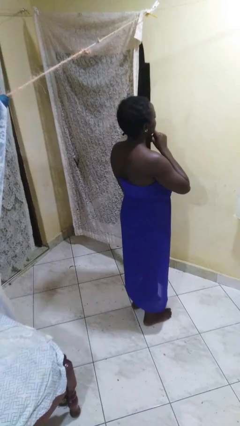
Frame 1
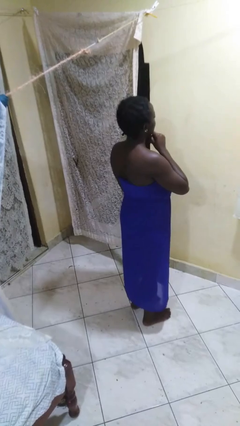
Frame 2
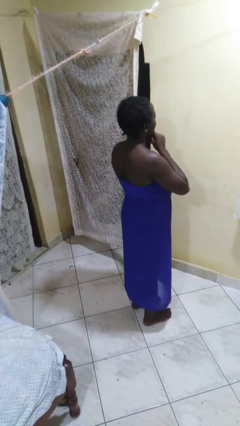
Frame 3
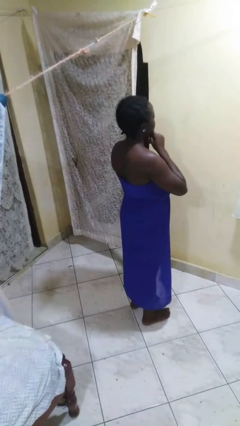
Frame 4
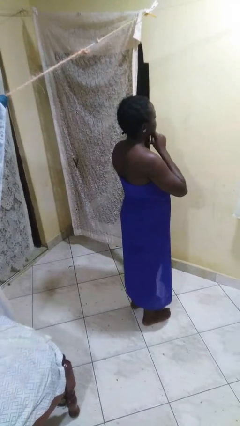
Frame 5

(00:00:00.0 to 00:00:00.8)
person strokes chin

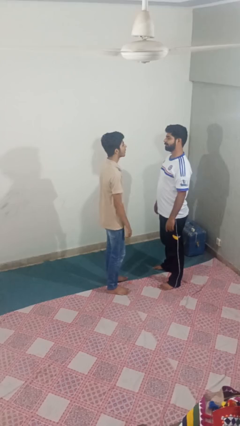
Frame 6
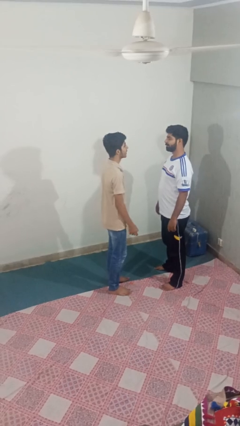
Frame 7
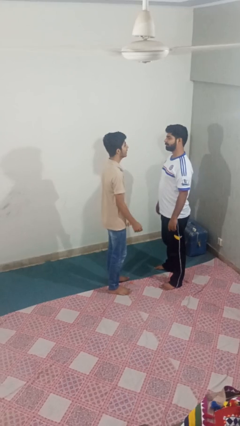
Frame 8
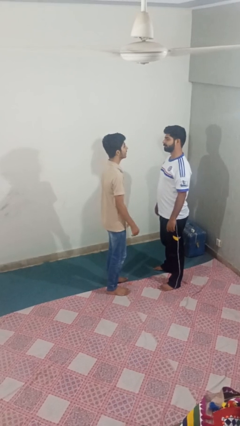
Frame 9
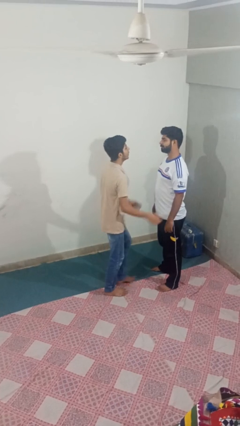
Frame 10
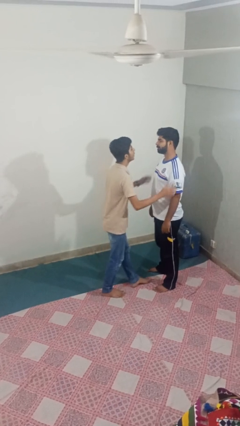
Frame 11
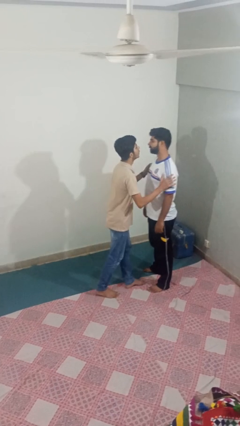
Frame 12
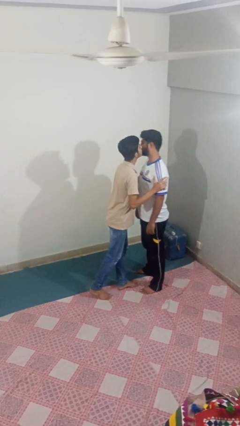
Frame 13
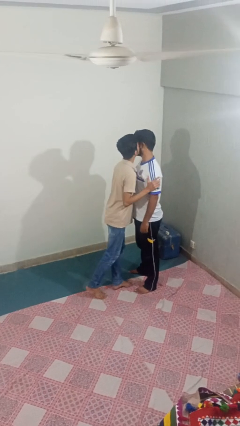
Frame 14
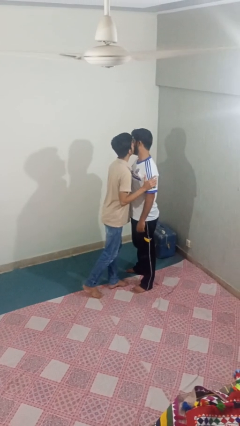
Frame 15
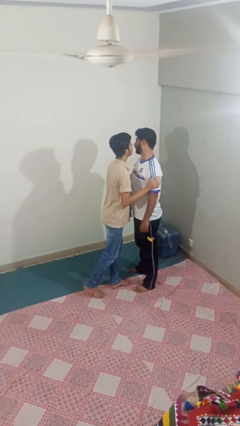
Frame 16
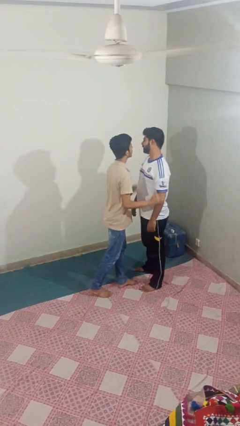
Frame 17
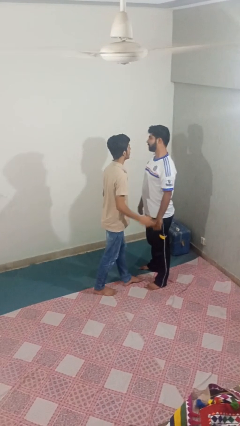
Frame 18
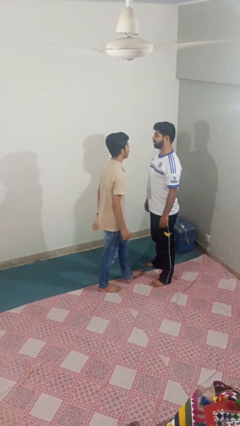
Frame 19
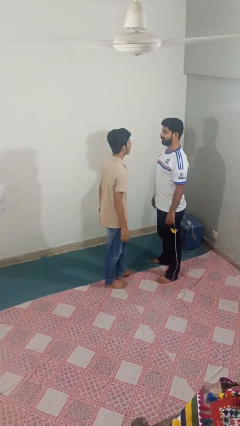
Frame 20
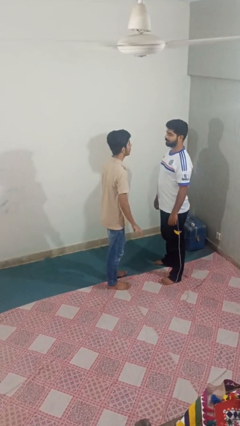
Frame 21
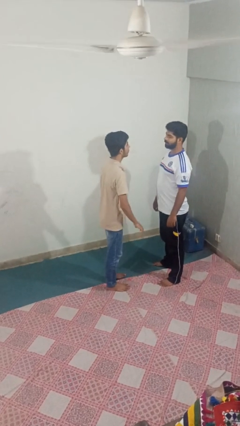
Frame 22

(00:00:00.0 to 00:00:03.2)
person kisses cheek of person

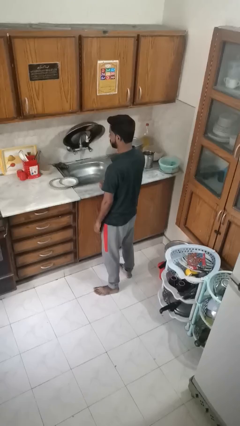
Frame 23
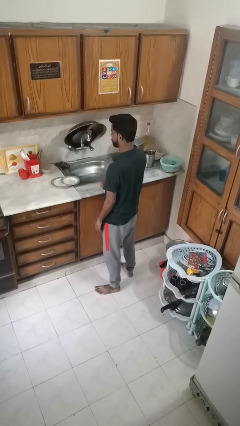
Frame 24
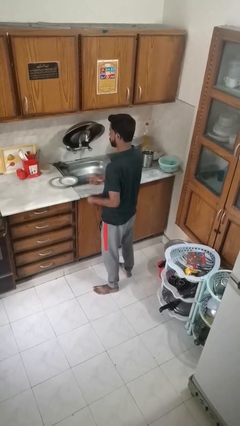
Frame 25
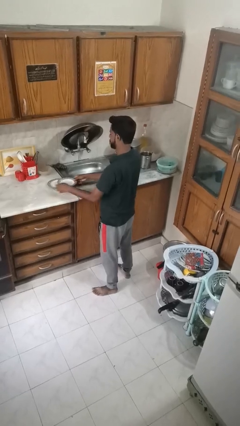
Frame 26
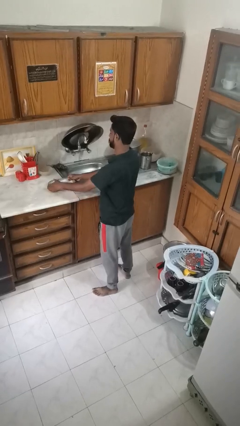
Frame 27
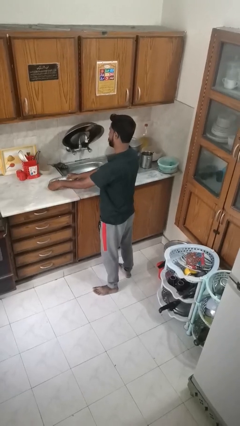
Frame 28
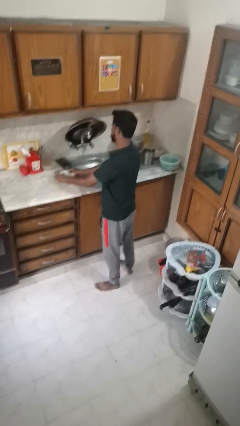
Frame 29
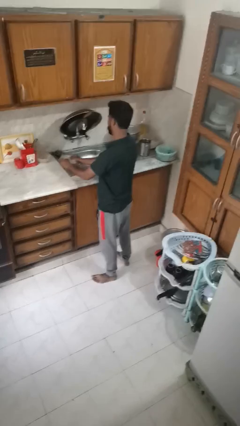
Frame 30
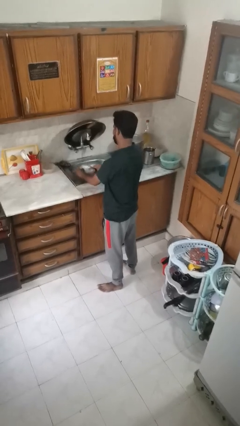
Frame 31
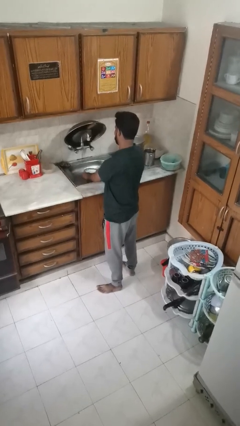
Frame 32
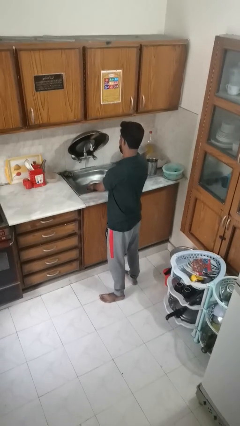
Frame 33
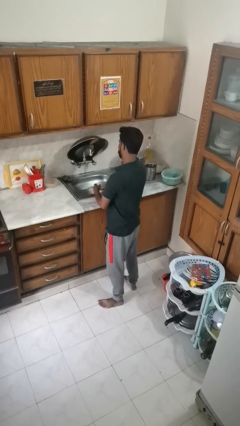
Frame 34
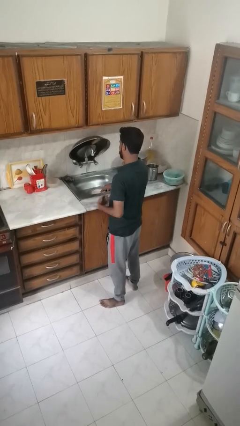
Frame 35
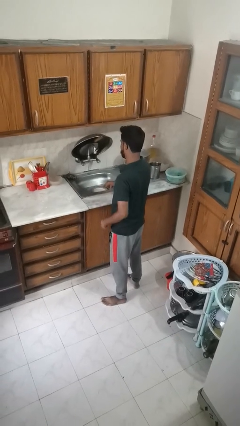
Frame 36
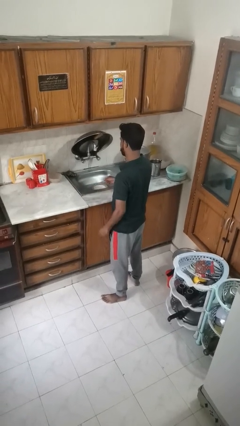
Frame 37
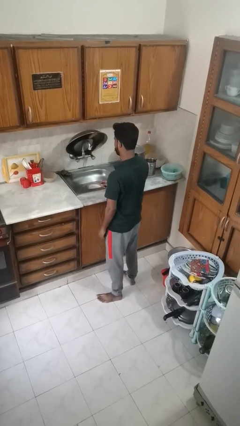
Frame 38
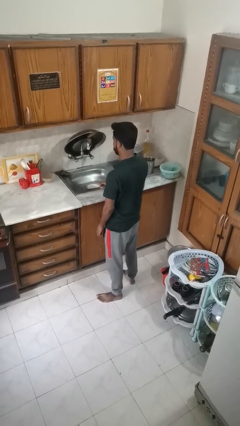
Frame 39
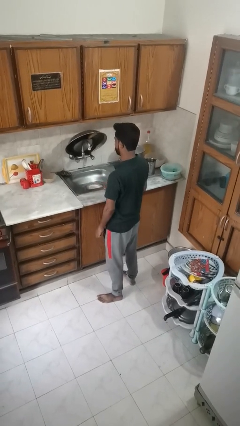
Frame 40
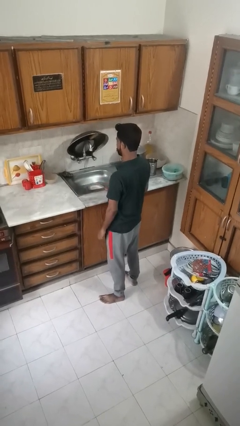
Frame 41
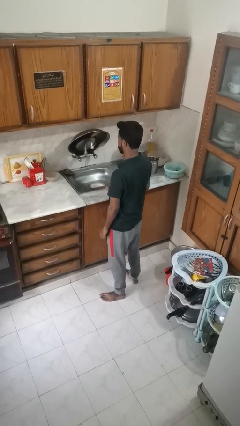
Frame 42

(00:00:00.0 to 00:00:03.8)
person opens dishwasher

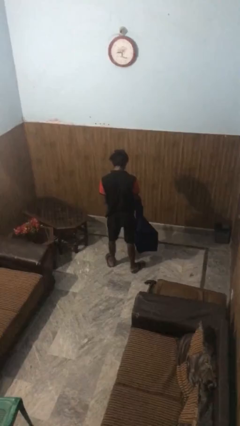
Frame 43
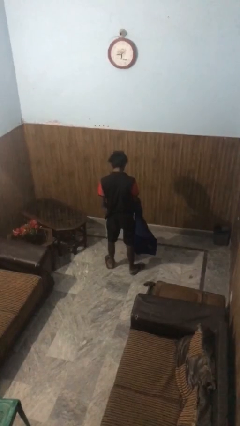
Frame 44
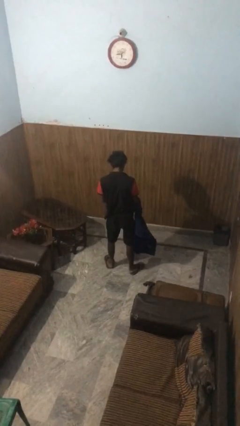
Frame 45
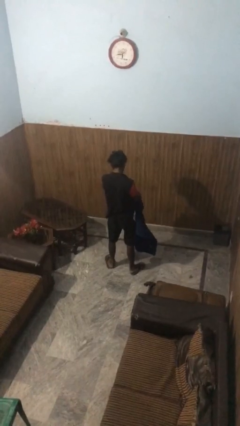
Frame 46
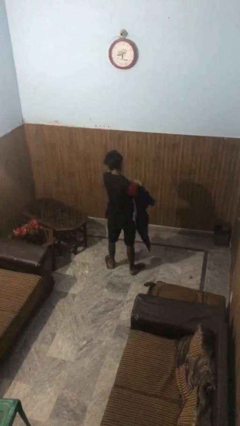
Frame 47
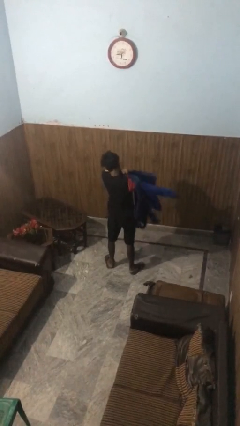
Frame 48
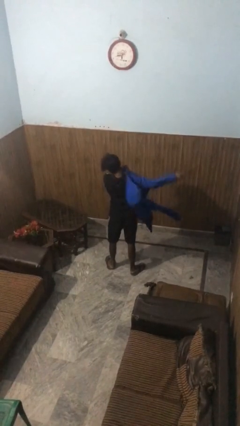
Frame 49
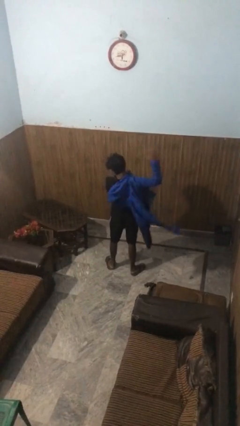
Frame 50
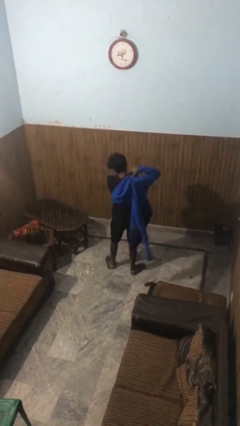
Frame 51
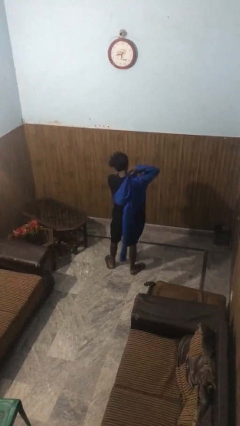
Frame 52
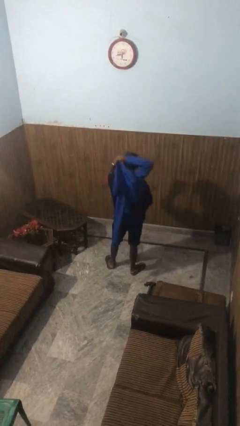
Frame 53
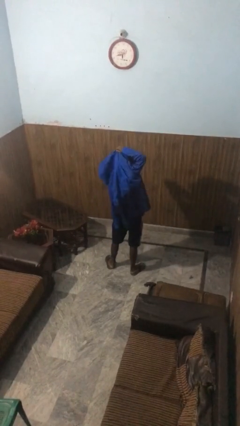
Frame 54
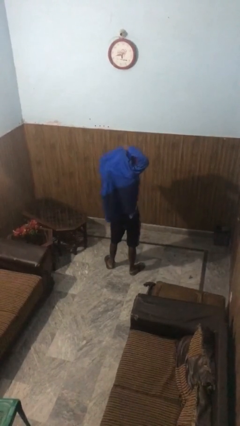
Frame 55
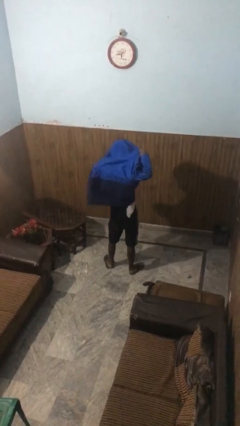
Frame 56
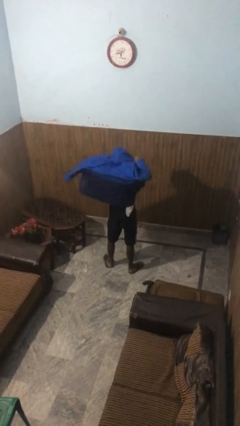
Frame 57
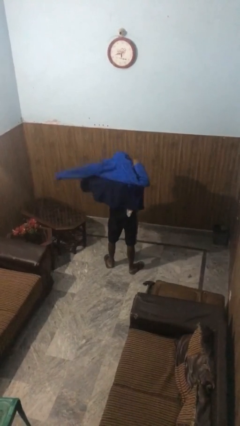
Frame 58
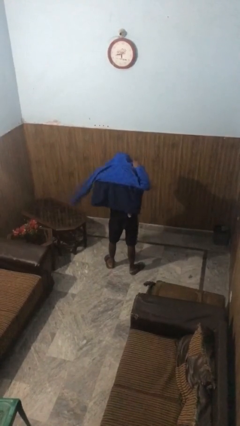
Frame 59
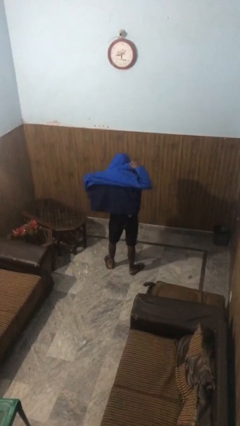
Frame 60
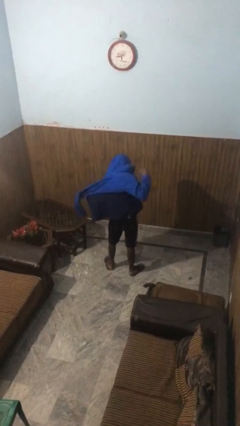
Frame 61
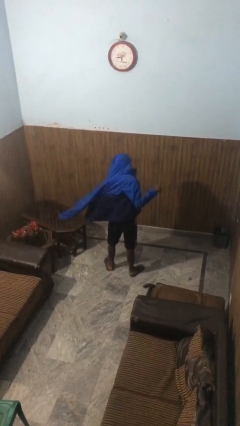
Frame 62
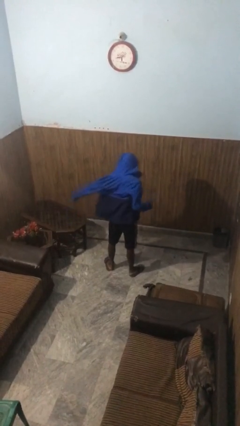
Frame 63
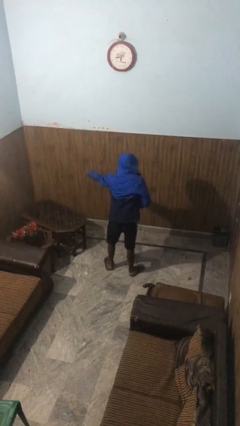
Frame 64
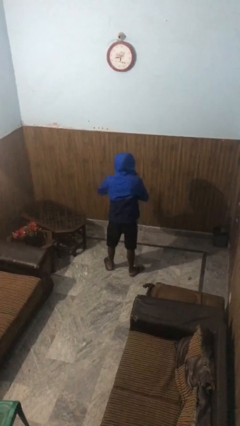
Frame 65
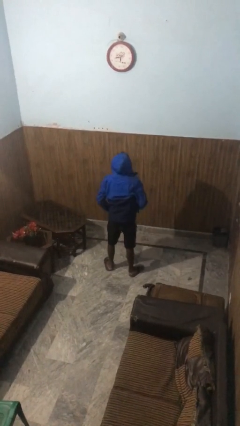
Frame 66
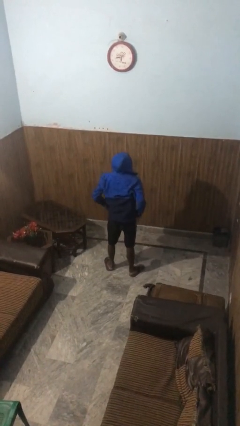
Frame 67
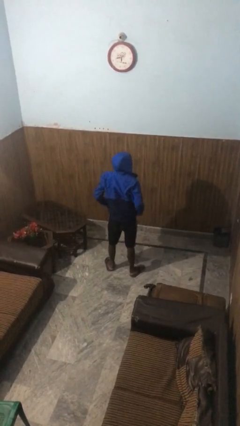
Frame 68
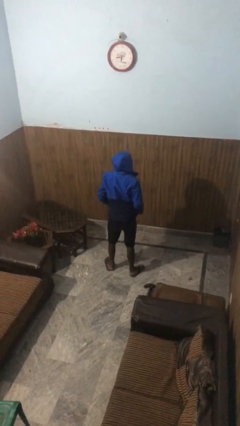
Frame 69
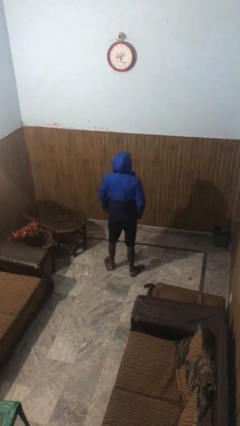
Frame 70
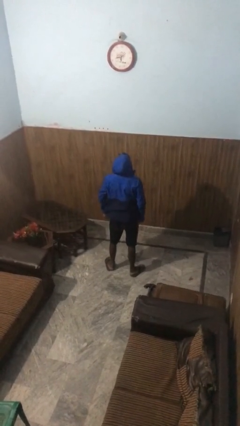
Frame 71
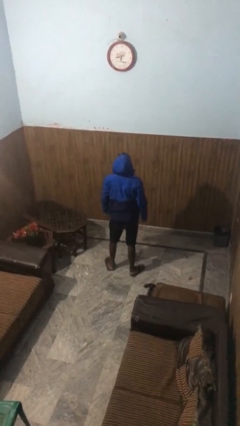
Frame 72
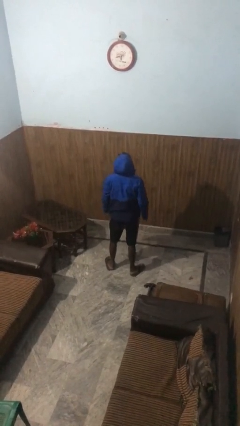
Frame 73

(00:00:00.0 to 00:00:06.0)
person puts on hoodie

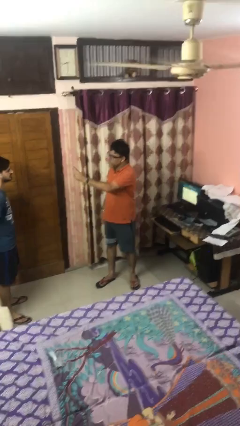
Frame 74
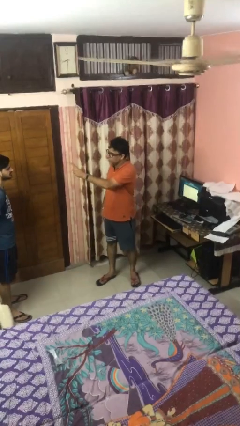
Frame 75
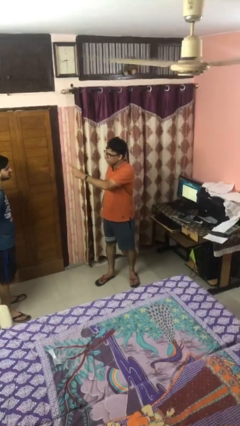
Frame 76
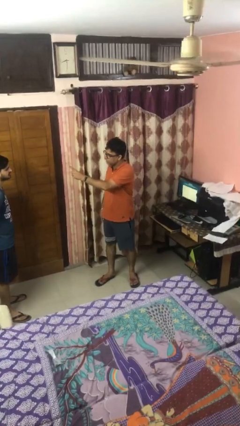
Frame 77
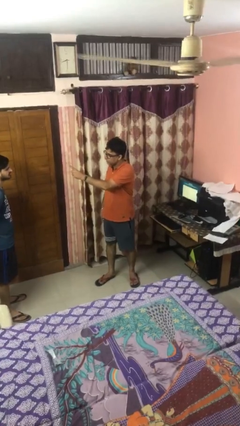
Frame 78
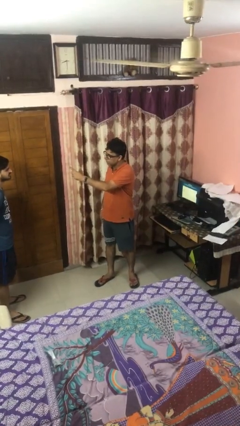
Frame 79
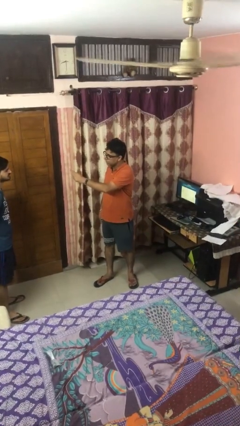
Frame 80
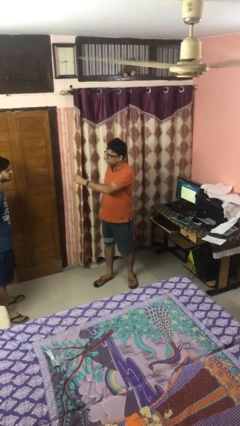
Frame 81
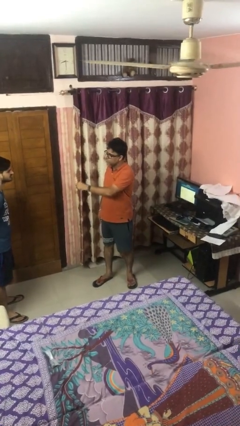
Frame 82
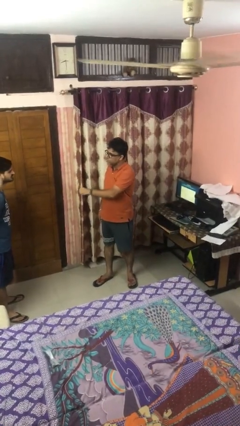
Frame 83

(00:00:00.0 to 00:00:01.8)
person points at person

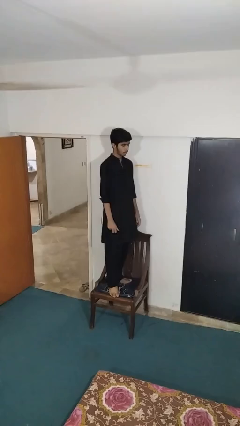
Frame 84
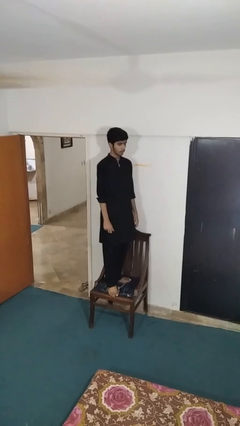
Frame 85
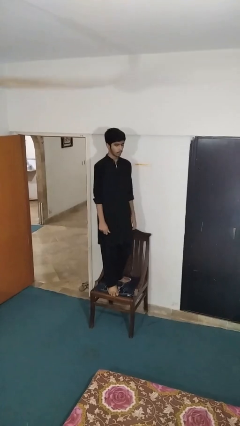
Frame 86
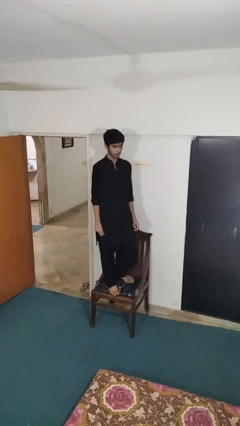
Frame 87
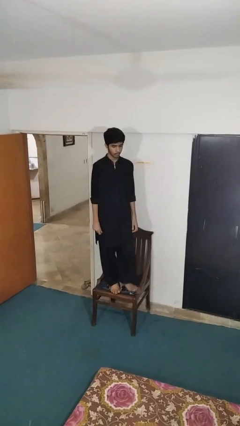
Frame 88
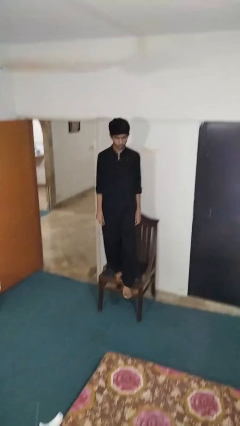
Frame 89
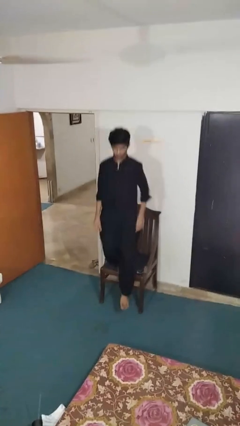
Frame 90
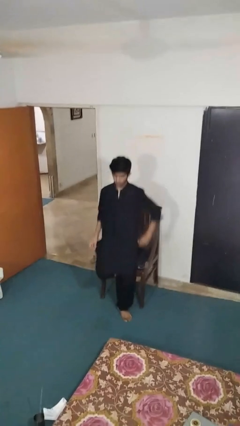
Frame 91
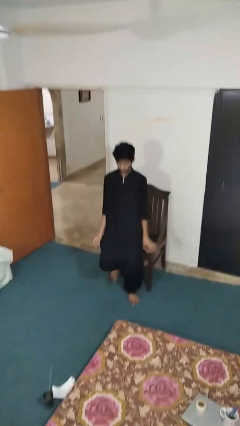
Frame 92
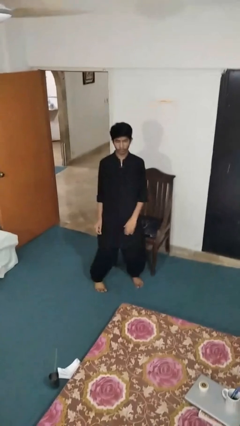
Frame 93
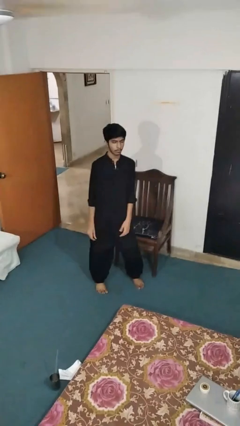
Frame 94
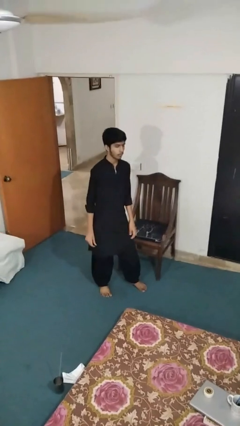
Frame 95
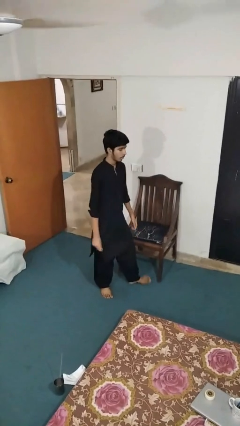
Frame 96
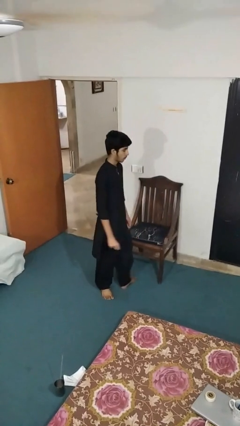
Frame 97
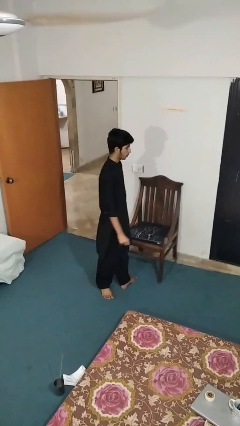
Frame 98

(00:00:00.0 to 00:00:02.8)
person climbs off chair
